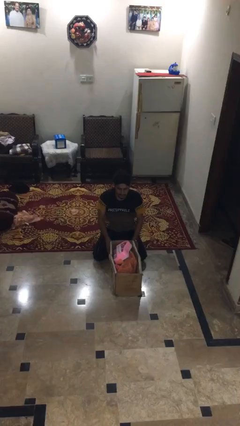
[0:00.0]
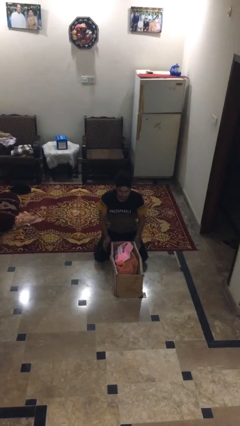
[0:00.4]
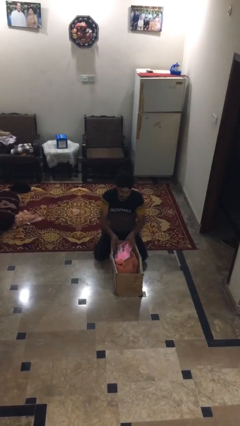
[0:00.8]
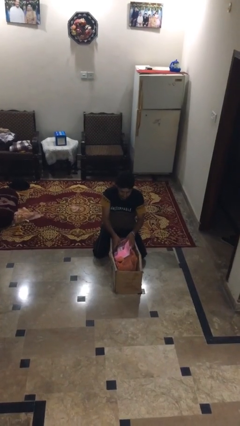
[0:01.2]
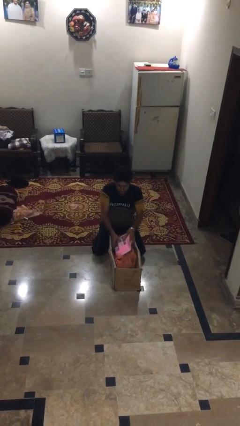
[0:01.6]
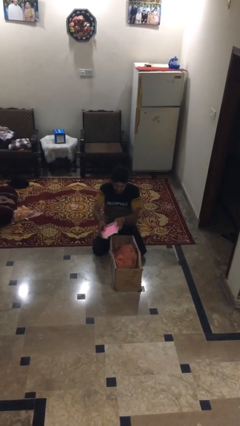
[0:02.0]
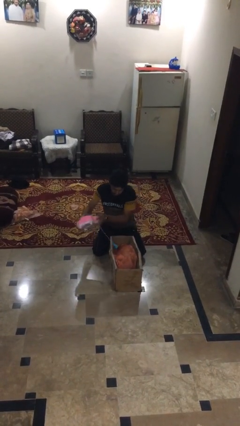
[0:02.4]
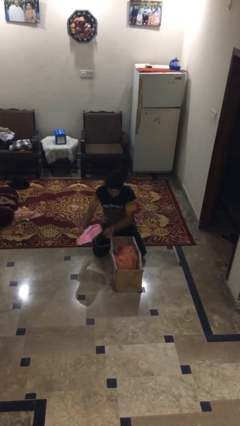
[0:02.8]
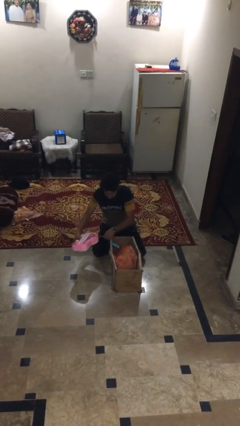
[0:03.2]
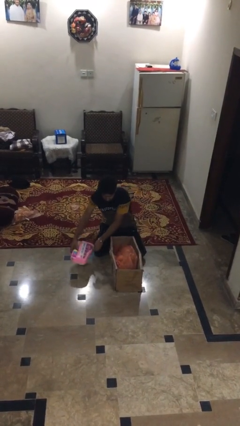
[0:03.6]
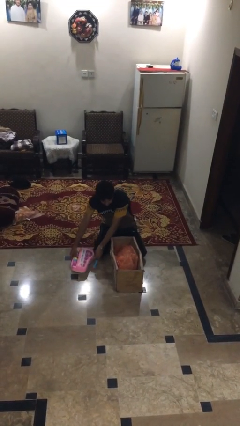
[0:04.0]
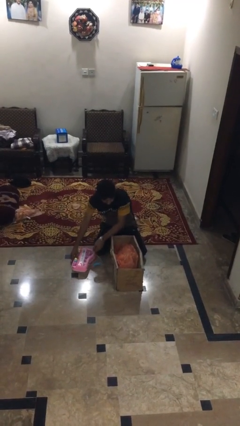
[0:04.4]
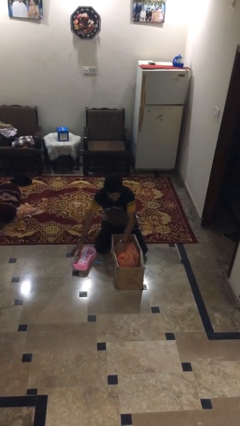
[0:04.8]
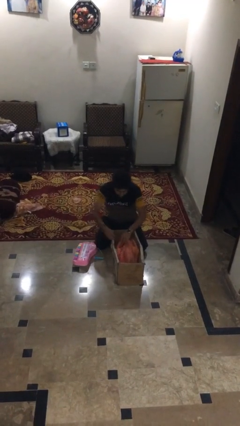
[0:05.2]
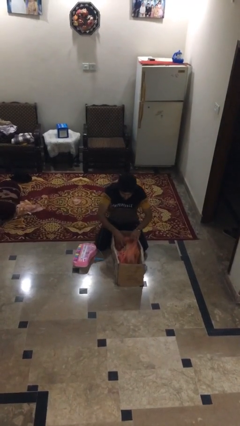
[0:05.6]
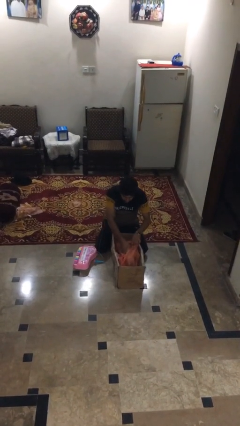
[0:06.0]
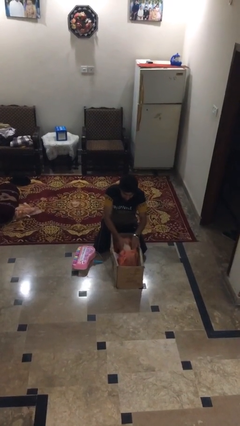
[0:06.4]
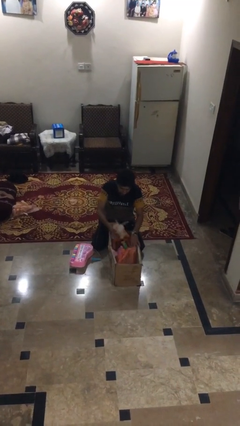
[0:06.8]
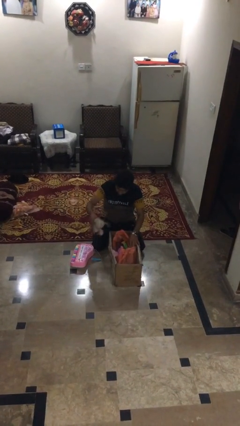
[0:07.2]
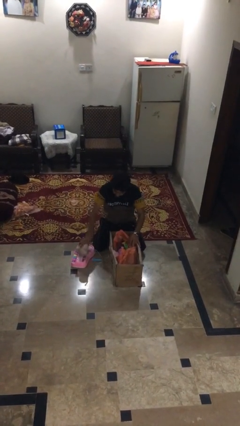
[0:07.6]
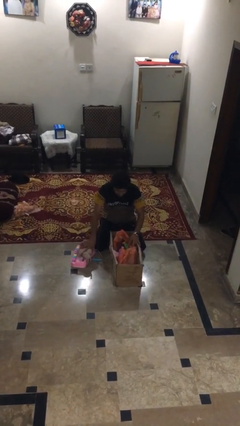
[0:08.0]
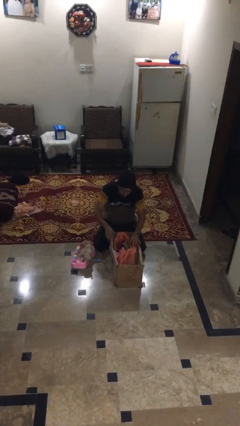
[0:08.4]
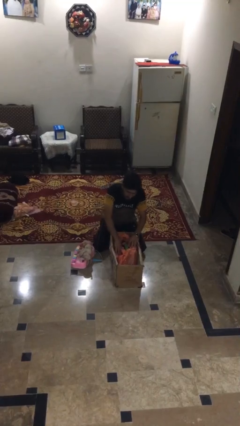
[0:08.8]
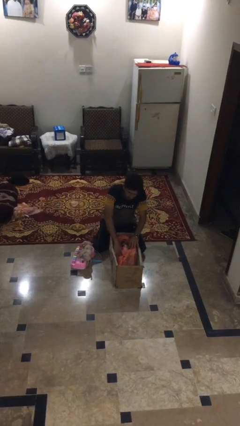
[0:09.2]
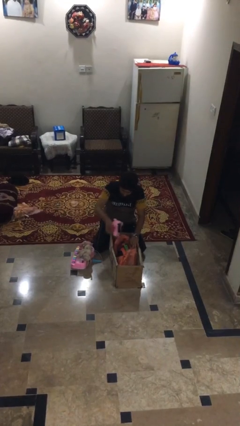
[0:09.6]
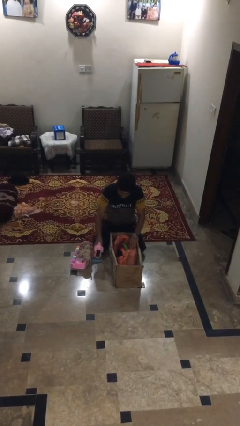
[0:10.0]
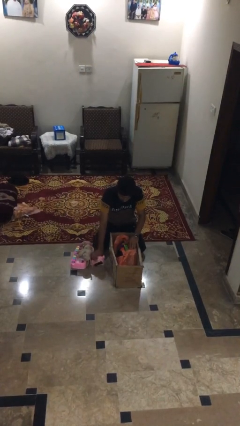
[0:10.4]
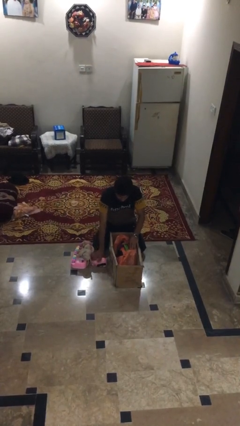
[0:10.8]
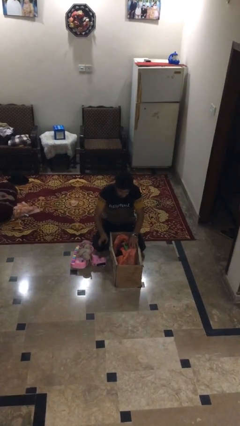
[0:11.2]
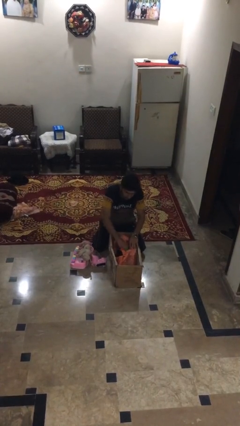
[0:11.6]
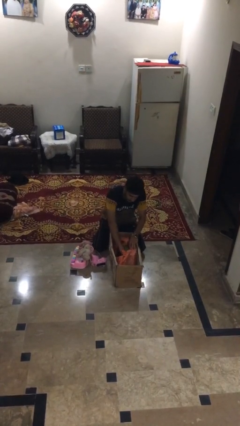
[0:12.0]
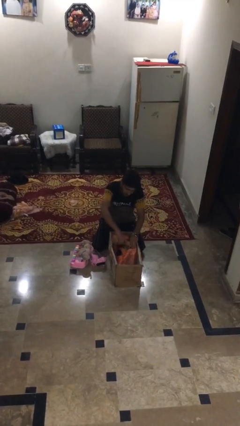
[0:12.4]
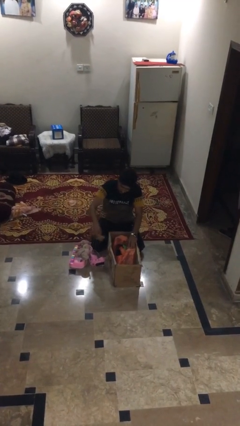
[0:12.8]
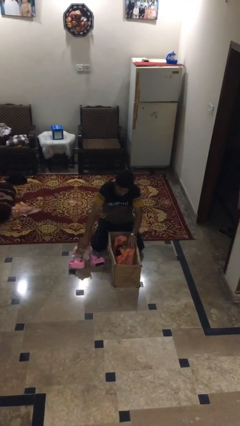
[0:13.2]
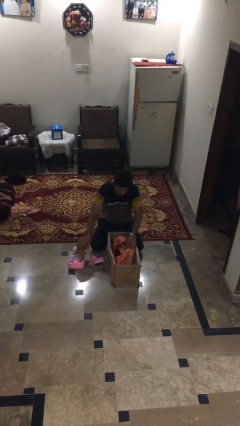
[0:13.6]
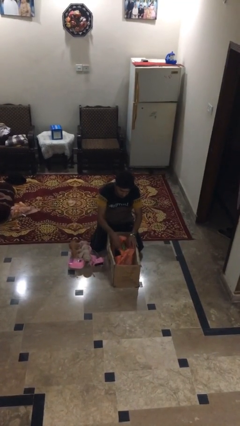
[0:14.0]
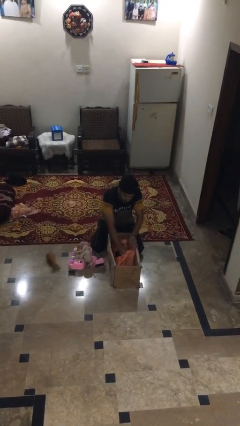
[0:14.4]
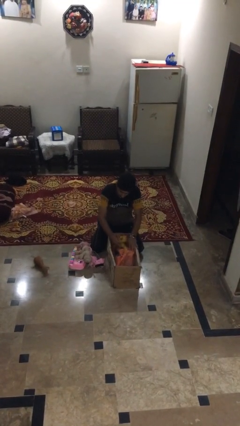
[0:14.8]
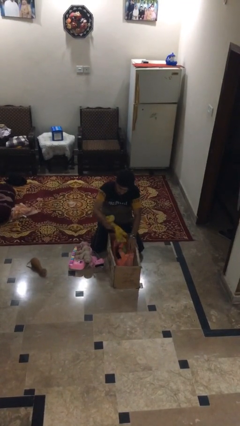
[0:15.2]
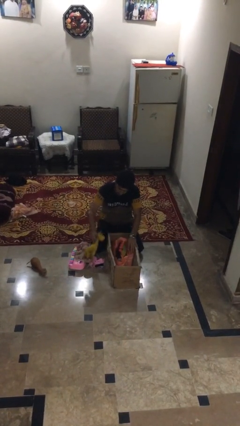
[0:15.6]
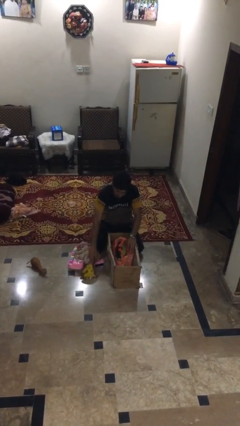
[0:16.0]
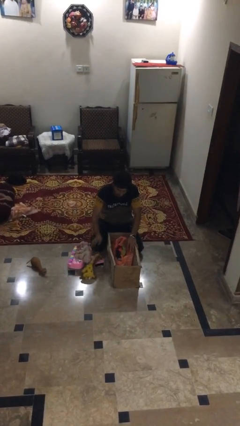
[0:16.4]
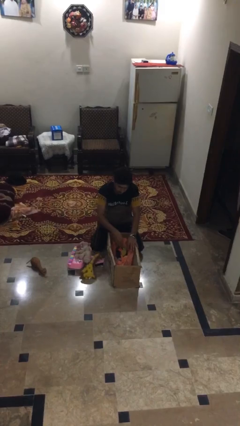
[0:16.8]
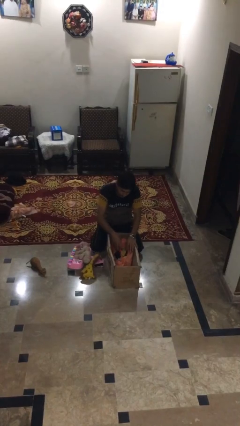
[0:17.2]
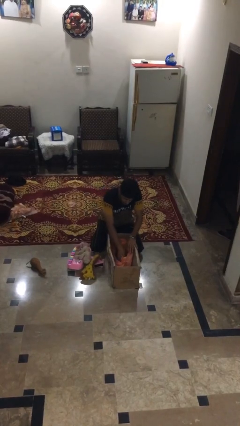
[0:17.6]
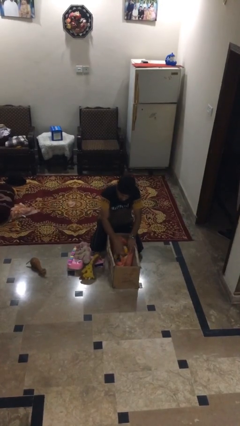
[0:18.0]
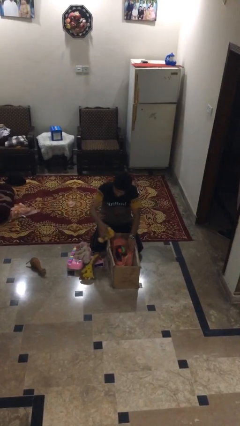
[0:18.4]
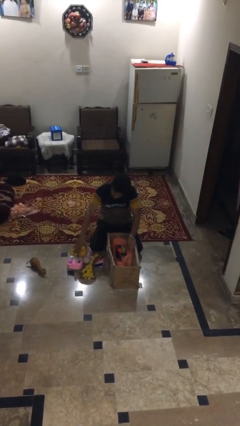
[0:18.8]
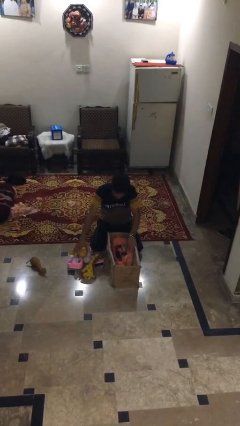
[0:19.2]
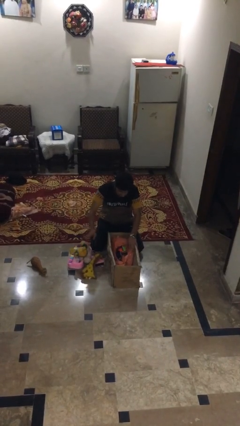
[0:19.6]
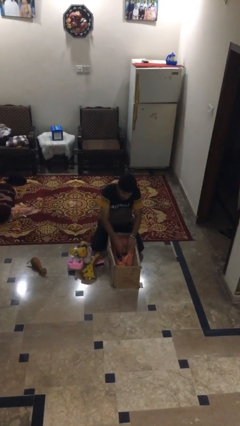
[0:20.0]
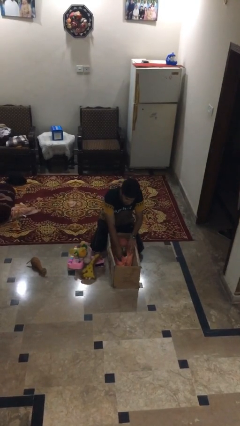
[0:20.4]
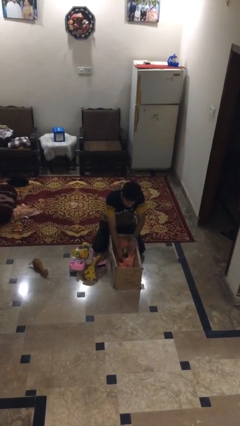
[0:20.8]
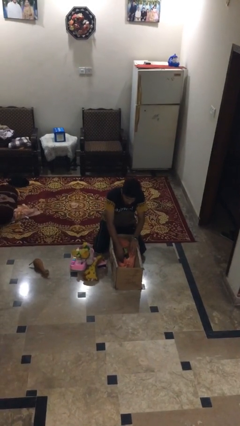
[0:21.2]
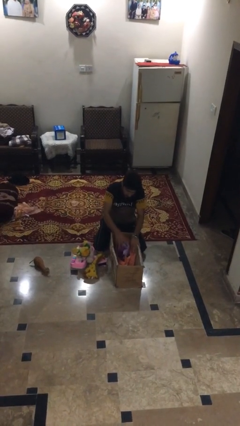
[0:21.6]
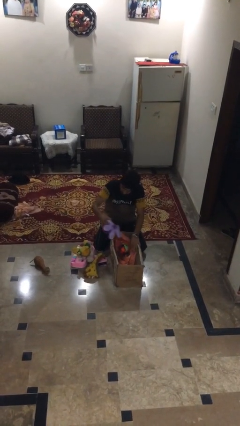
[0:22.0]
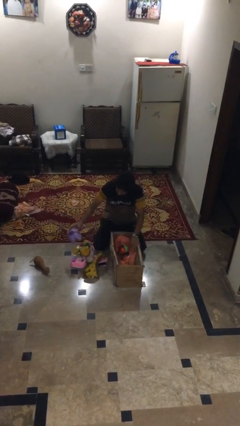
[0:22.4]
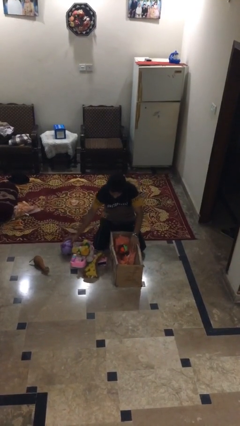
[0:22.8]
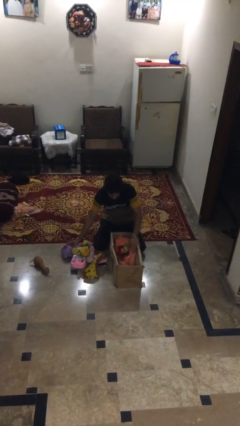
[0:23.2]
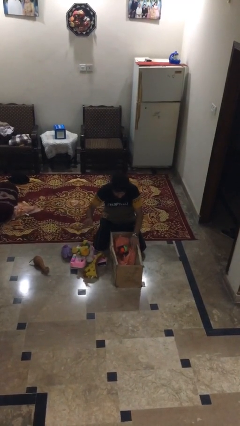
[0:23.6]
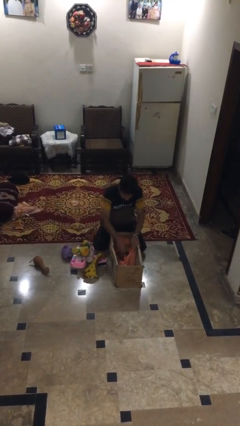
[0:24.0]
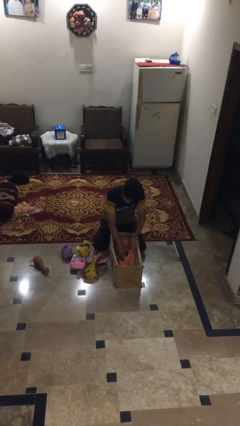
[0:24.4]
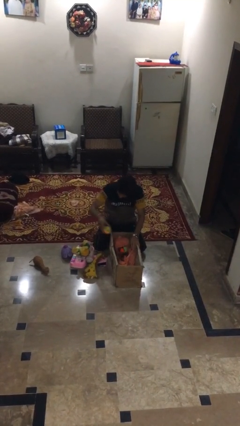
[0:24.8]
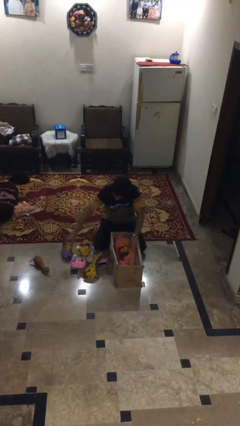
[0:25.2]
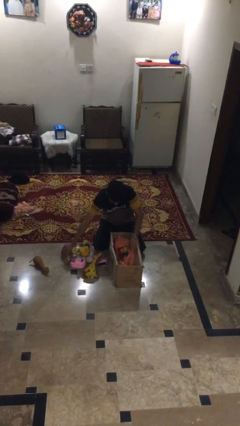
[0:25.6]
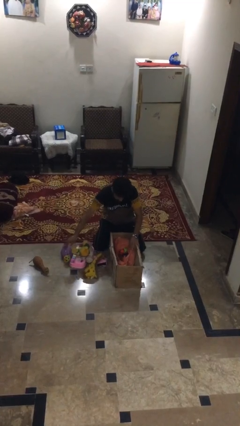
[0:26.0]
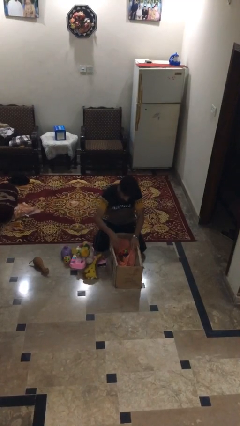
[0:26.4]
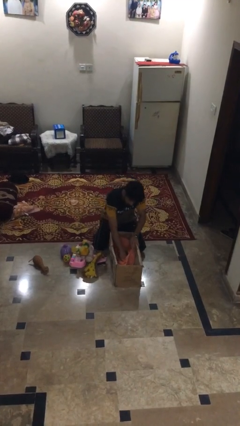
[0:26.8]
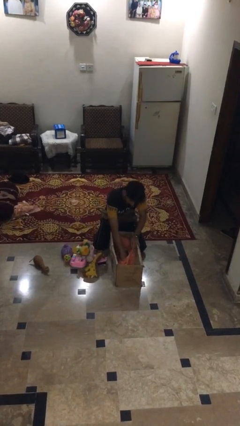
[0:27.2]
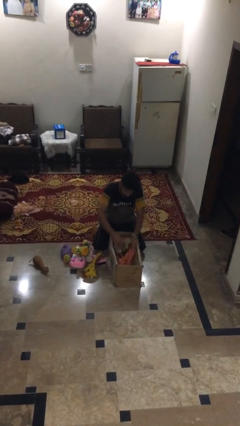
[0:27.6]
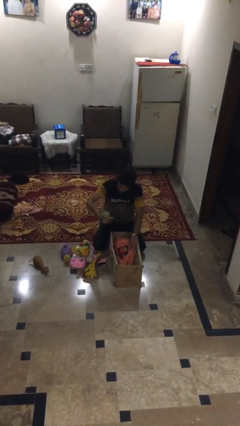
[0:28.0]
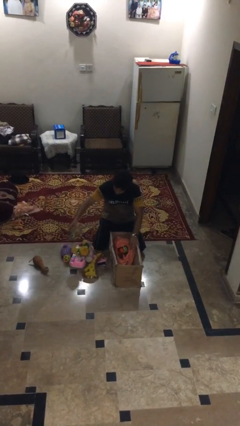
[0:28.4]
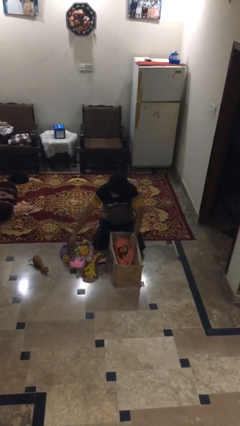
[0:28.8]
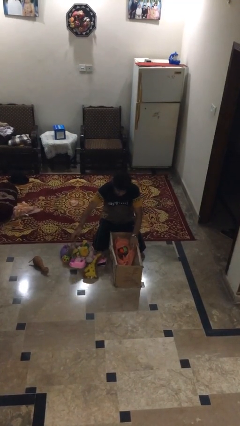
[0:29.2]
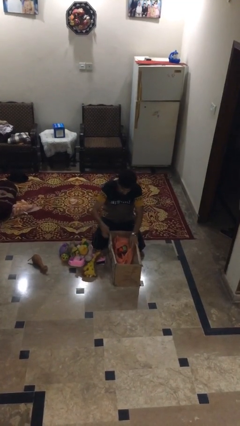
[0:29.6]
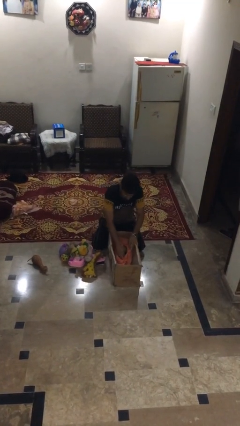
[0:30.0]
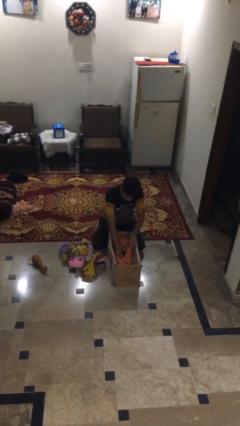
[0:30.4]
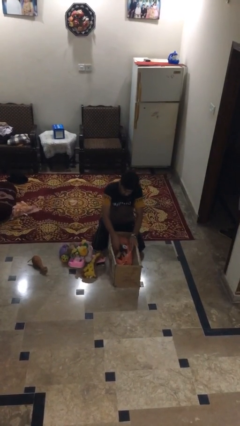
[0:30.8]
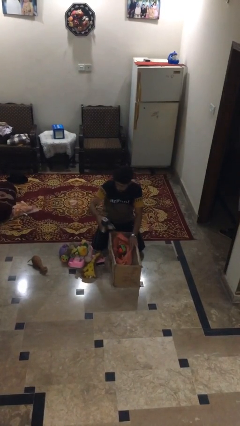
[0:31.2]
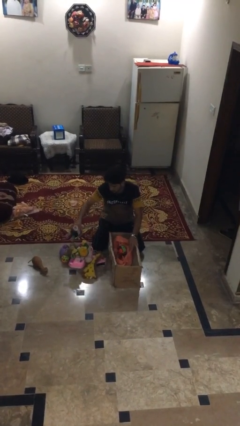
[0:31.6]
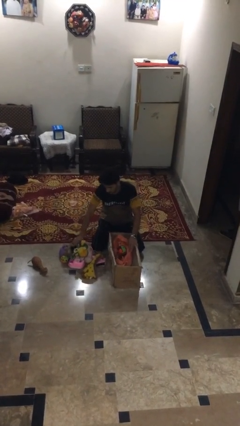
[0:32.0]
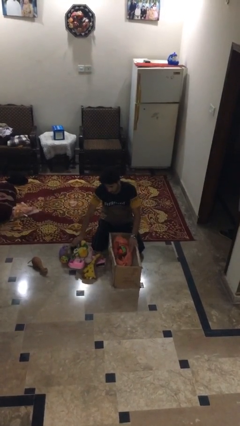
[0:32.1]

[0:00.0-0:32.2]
person unloads box onto floor

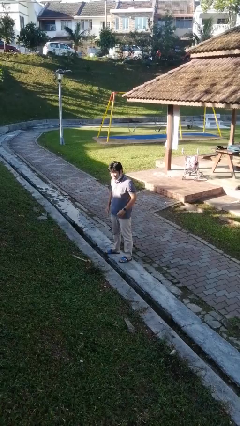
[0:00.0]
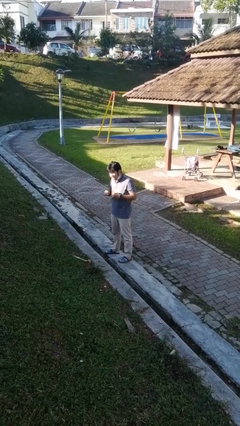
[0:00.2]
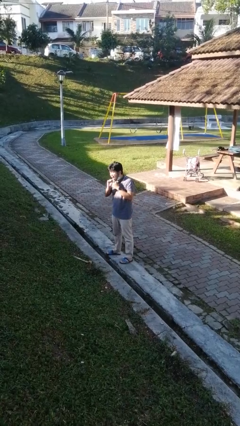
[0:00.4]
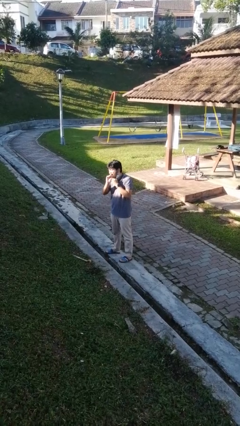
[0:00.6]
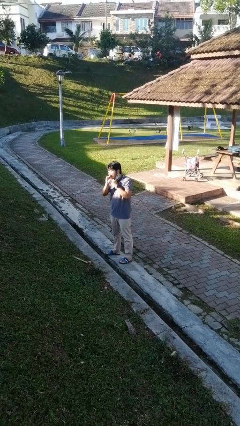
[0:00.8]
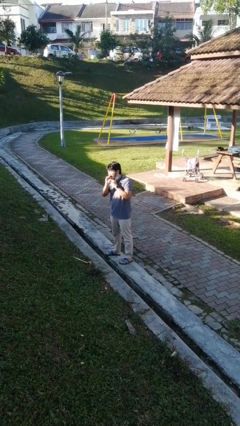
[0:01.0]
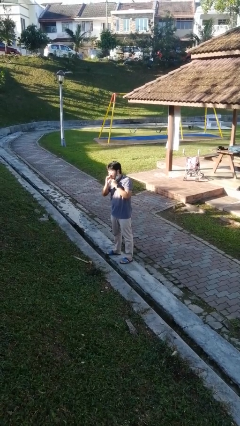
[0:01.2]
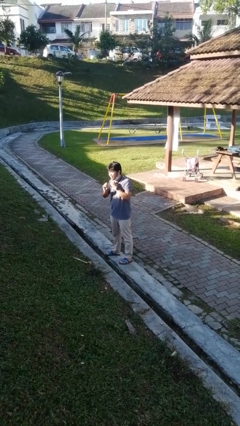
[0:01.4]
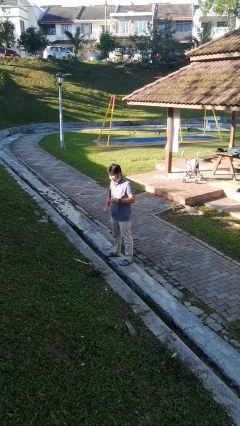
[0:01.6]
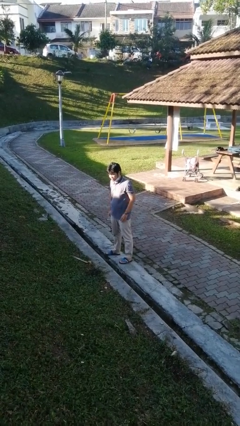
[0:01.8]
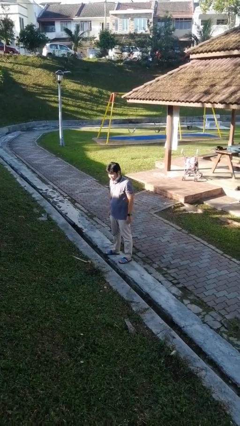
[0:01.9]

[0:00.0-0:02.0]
person flosses
